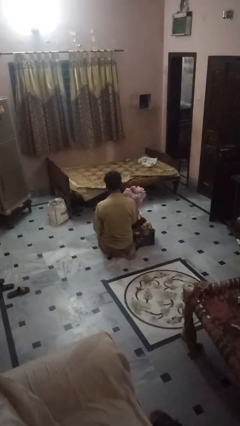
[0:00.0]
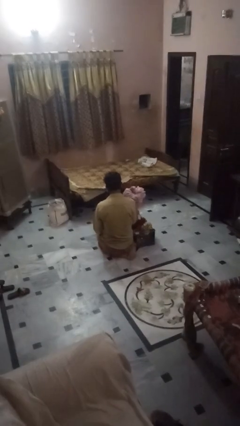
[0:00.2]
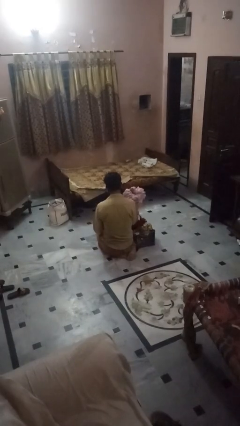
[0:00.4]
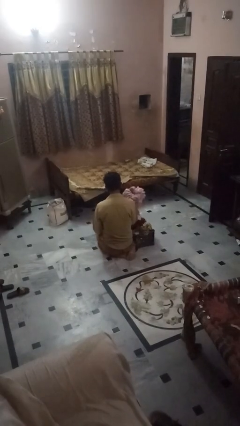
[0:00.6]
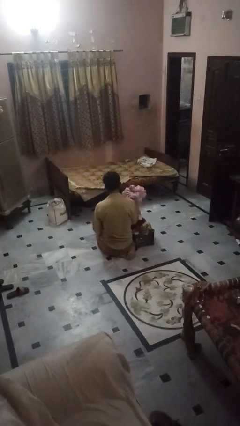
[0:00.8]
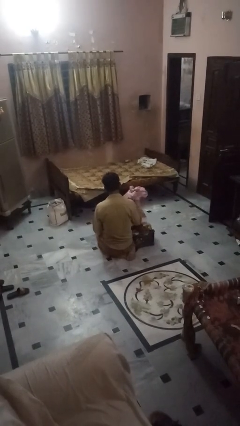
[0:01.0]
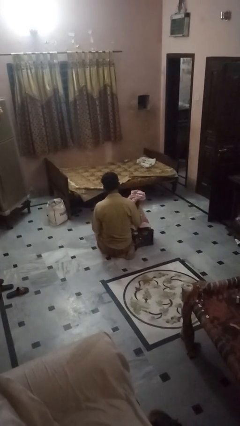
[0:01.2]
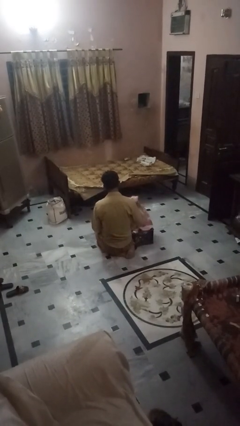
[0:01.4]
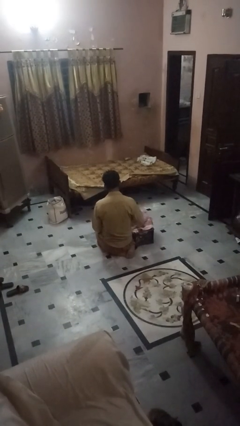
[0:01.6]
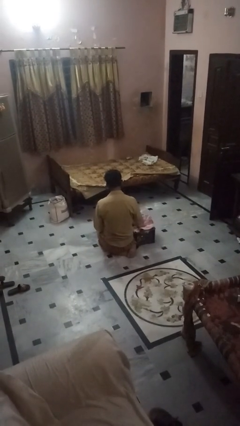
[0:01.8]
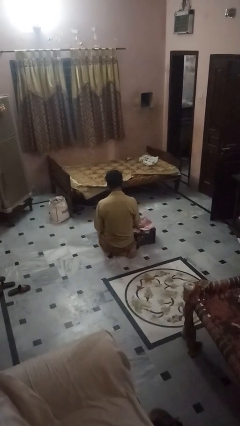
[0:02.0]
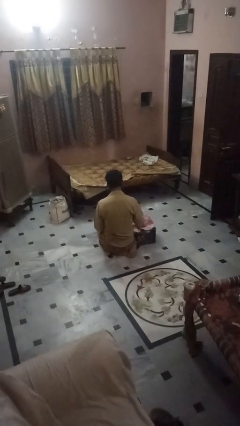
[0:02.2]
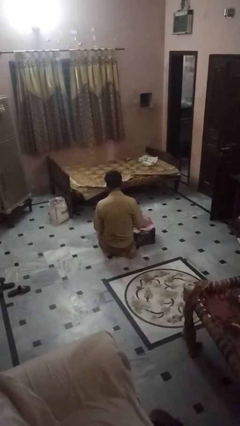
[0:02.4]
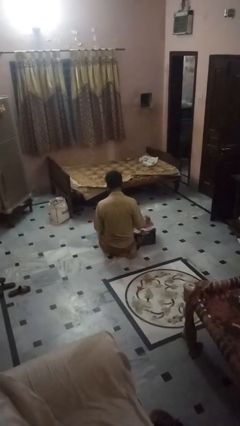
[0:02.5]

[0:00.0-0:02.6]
person puts object into bag

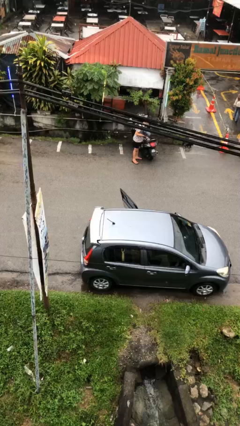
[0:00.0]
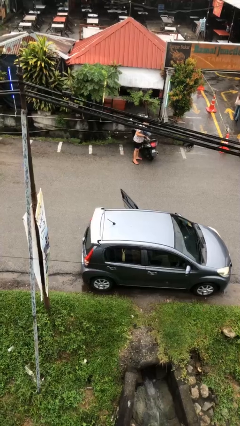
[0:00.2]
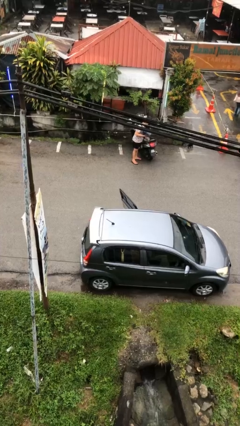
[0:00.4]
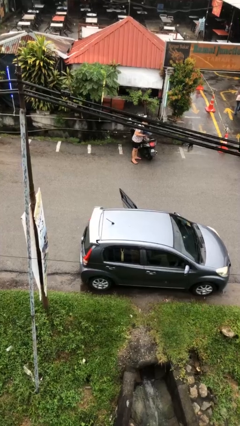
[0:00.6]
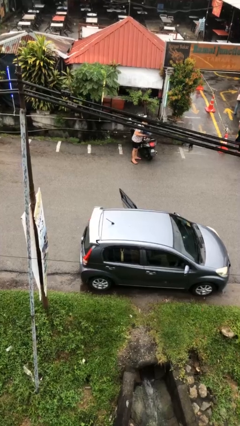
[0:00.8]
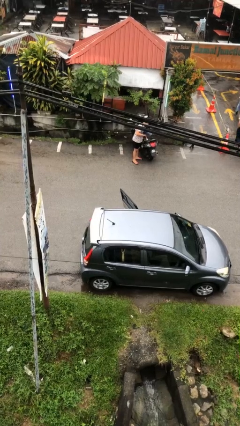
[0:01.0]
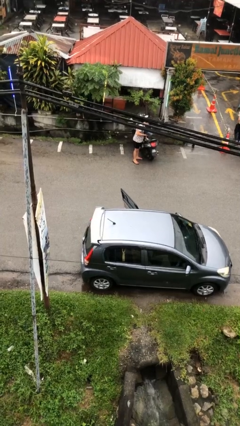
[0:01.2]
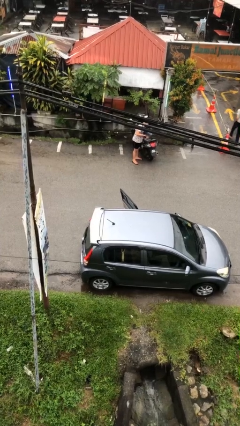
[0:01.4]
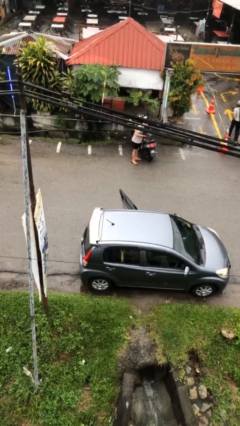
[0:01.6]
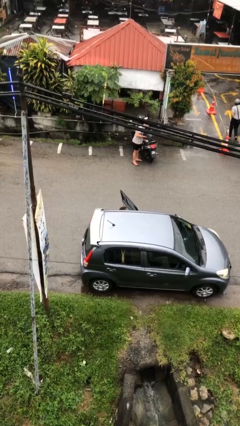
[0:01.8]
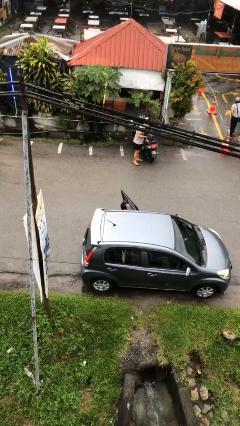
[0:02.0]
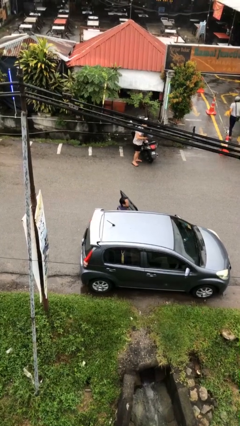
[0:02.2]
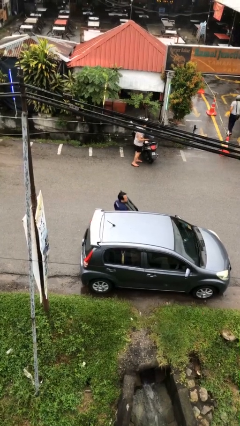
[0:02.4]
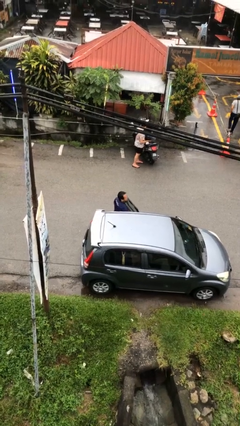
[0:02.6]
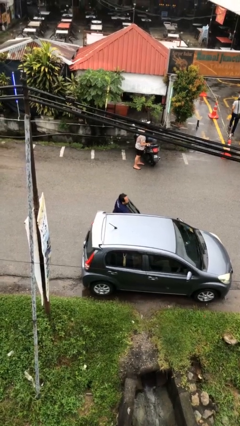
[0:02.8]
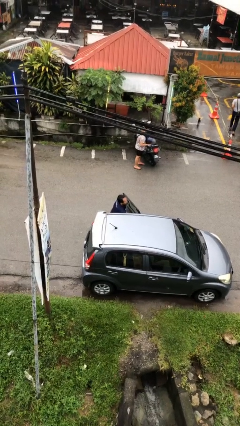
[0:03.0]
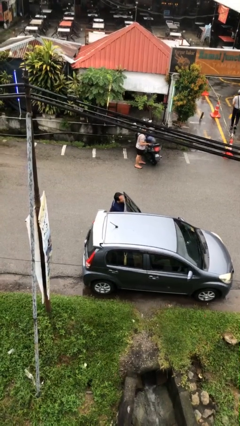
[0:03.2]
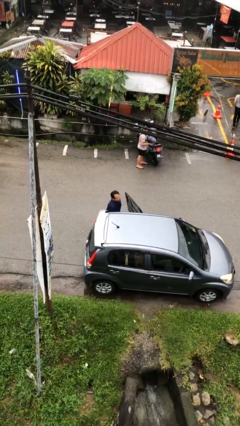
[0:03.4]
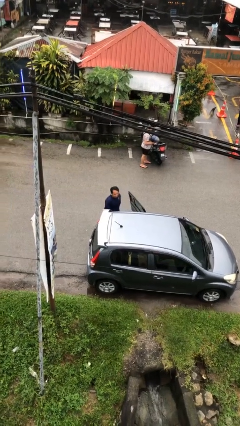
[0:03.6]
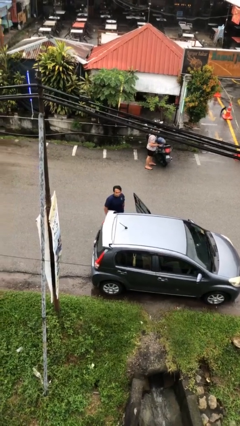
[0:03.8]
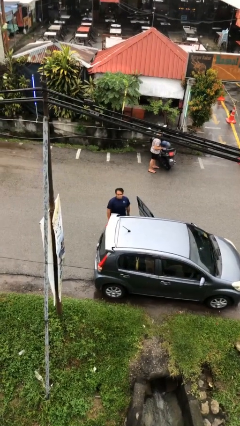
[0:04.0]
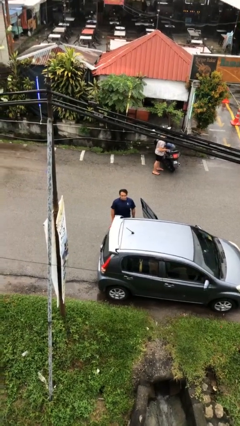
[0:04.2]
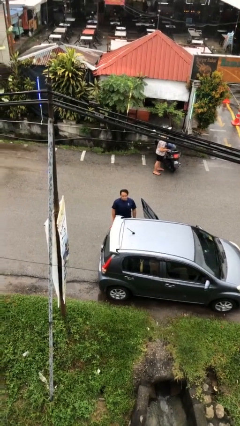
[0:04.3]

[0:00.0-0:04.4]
person exits car

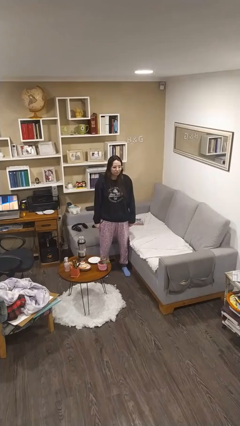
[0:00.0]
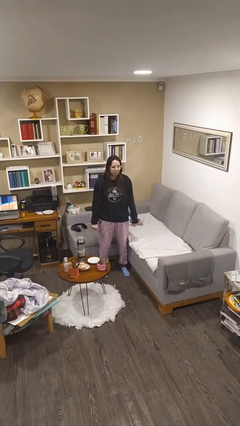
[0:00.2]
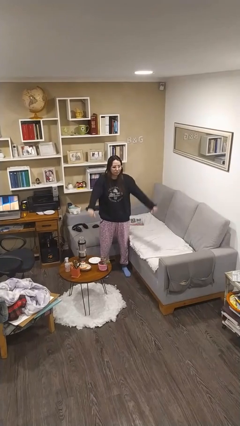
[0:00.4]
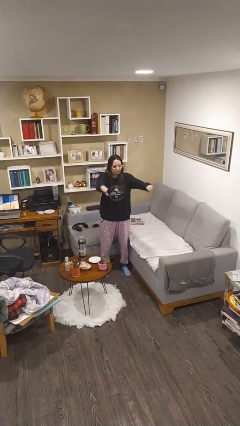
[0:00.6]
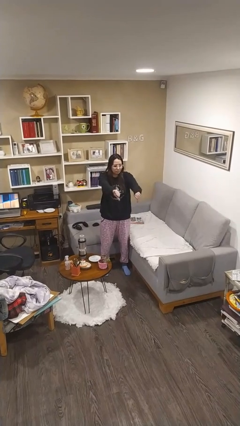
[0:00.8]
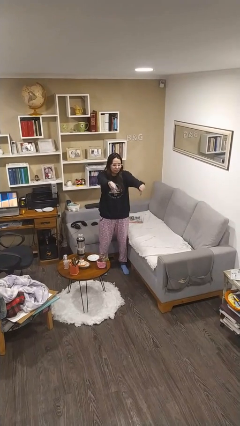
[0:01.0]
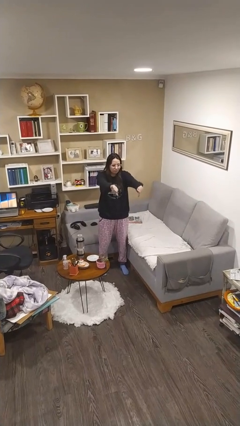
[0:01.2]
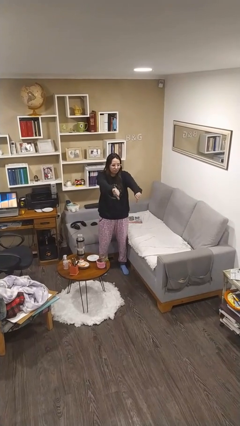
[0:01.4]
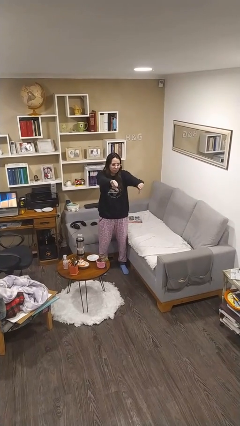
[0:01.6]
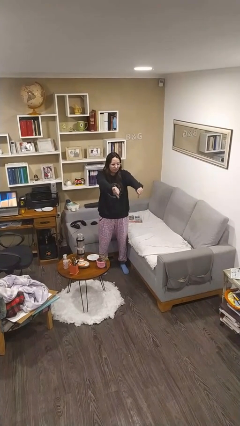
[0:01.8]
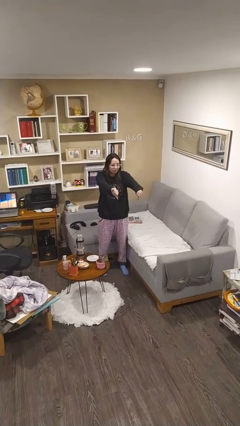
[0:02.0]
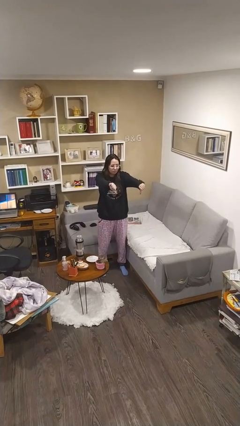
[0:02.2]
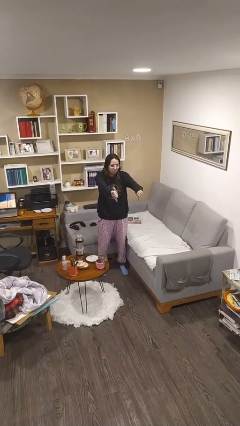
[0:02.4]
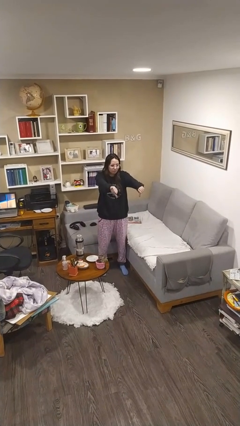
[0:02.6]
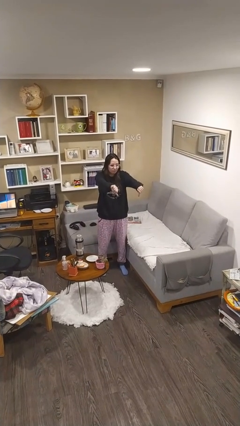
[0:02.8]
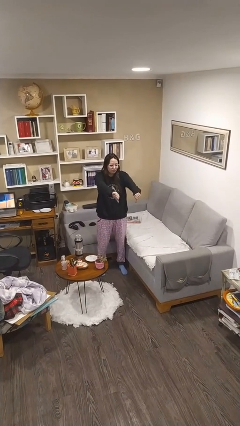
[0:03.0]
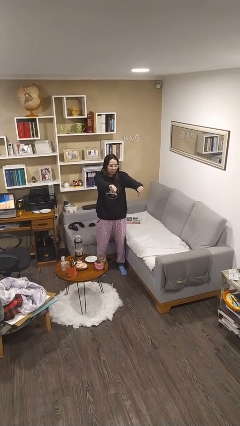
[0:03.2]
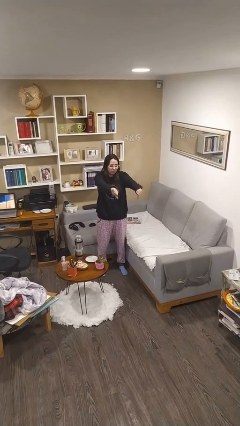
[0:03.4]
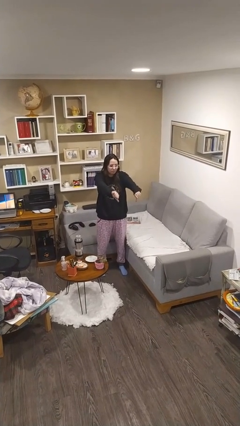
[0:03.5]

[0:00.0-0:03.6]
person gestures thumbs down

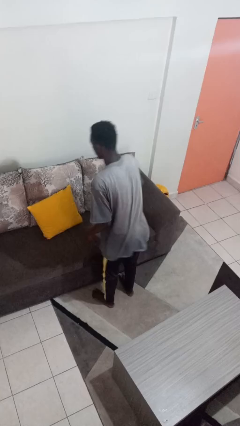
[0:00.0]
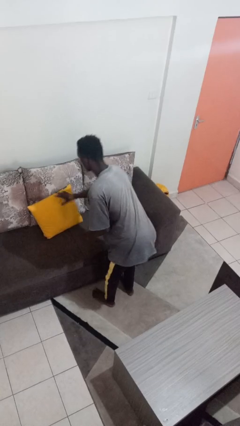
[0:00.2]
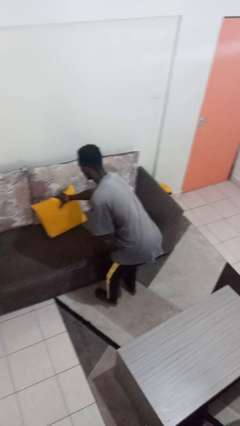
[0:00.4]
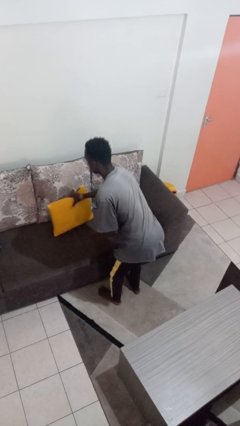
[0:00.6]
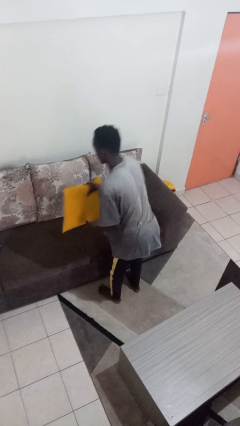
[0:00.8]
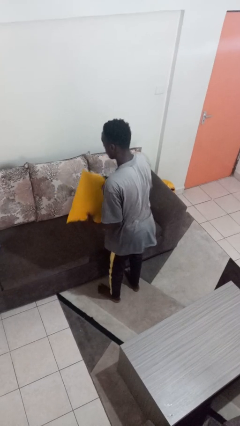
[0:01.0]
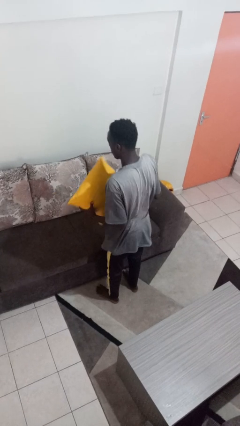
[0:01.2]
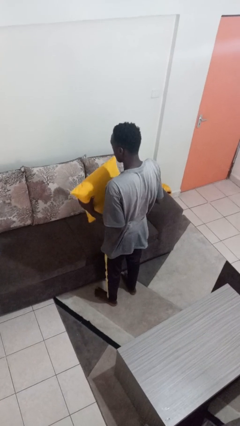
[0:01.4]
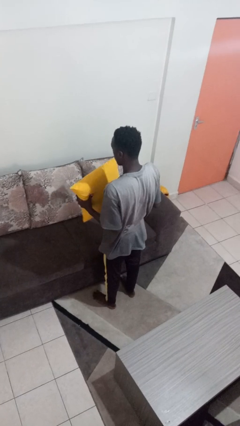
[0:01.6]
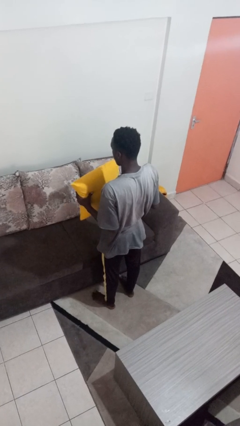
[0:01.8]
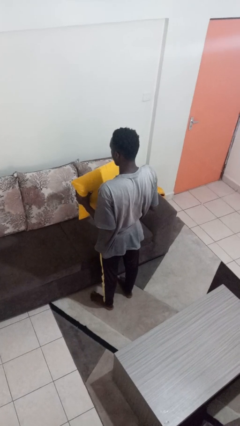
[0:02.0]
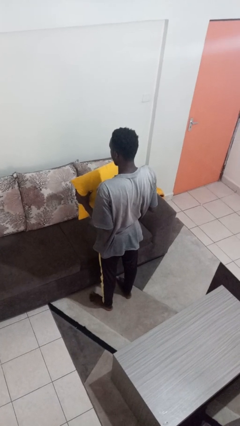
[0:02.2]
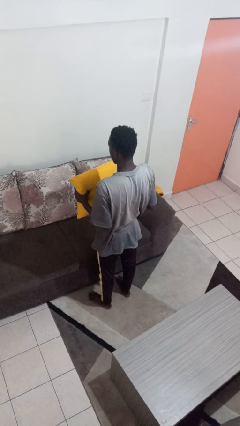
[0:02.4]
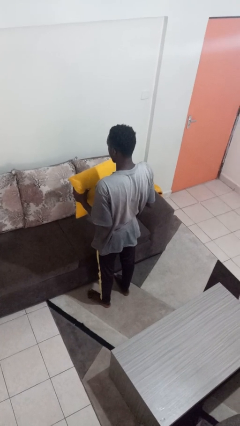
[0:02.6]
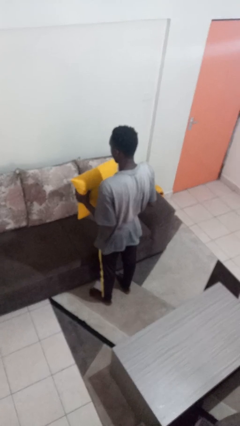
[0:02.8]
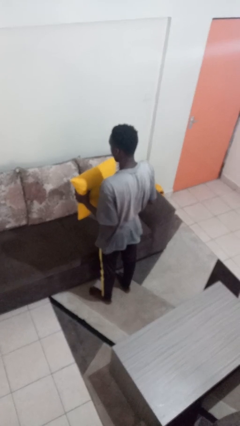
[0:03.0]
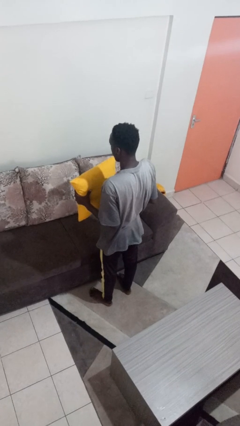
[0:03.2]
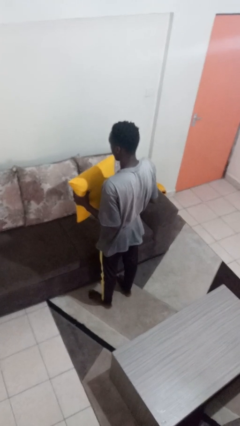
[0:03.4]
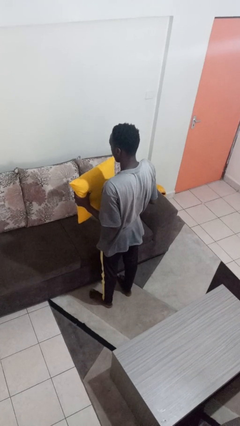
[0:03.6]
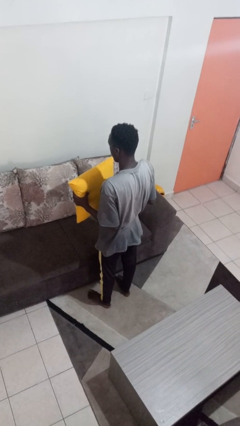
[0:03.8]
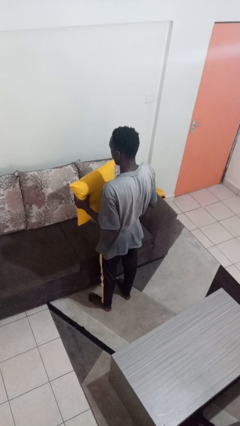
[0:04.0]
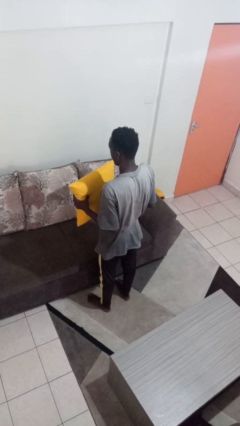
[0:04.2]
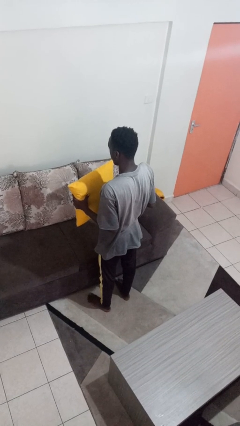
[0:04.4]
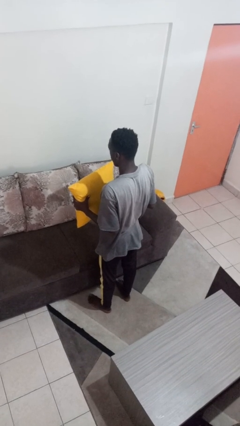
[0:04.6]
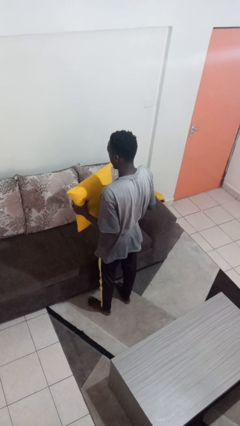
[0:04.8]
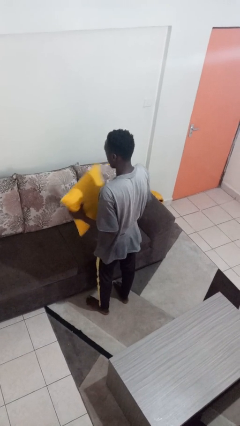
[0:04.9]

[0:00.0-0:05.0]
person picks up object from couch

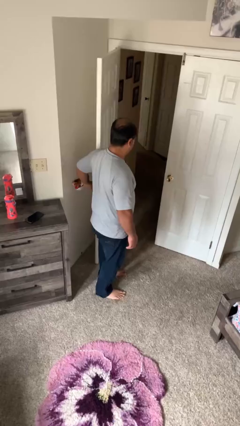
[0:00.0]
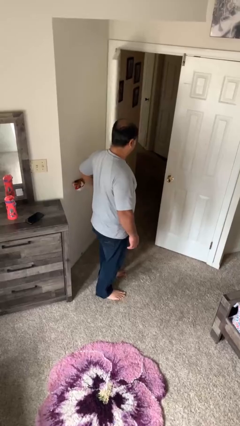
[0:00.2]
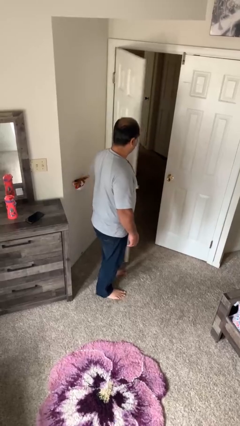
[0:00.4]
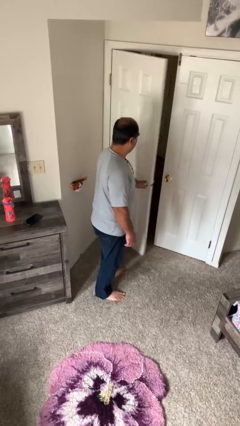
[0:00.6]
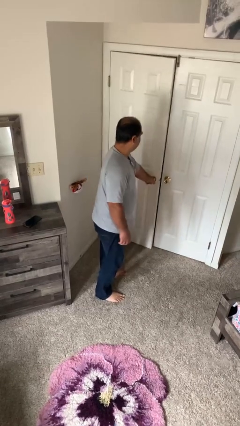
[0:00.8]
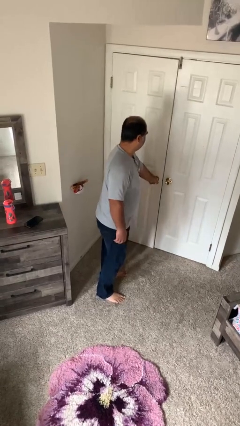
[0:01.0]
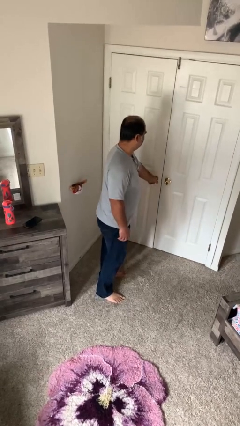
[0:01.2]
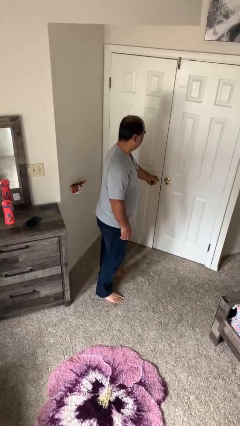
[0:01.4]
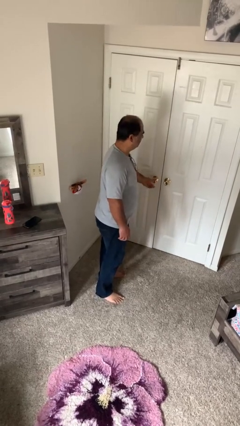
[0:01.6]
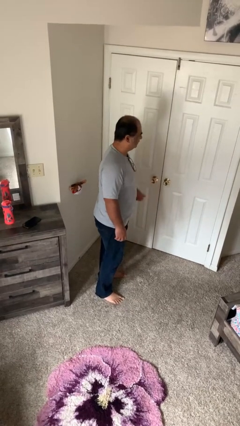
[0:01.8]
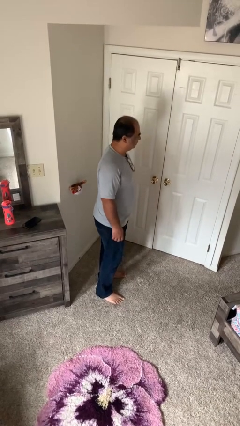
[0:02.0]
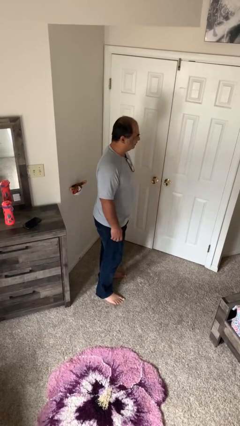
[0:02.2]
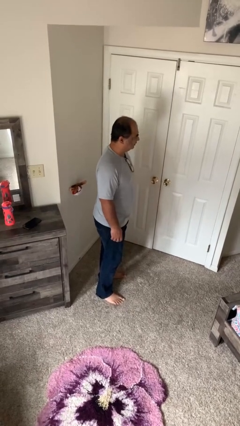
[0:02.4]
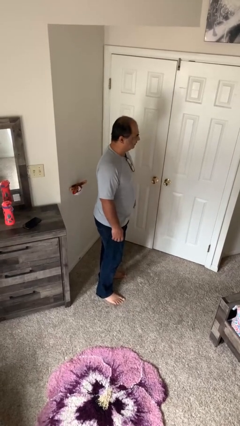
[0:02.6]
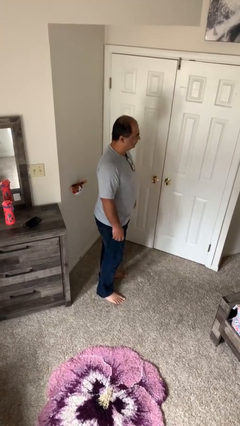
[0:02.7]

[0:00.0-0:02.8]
person closes facility door
